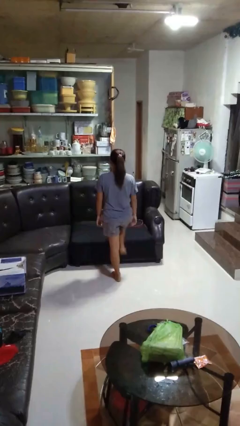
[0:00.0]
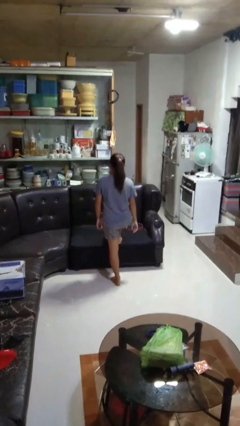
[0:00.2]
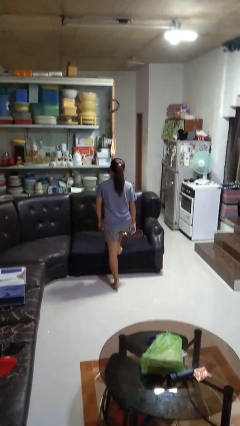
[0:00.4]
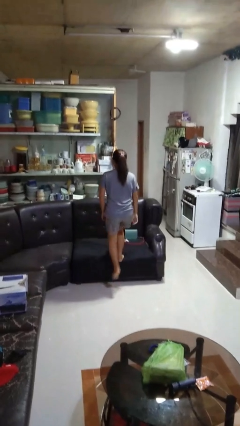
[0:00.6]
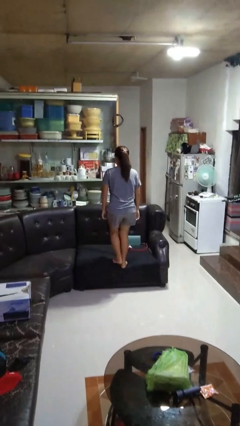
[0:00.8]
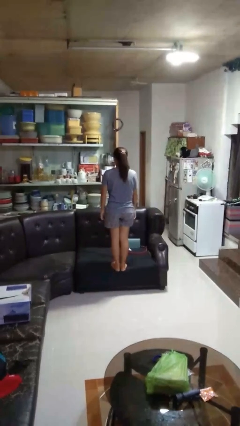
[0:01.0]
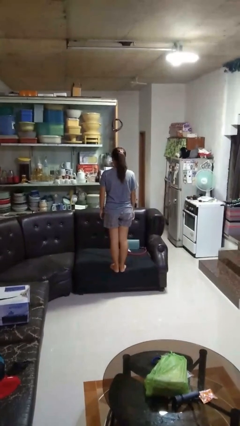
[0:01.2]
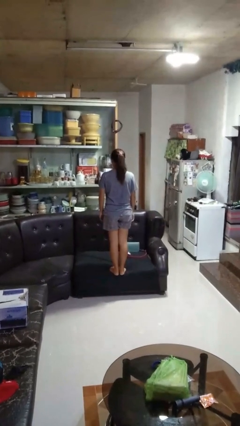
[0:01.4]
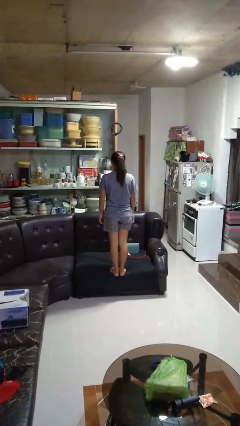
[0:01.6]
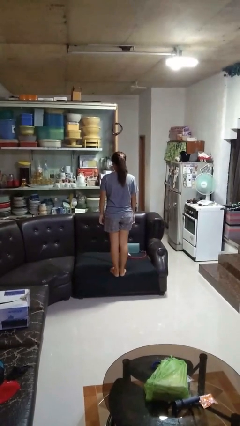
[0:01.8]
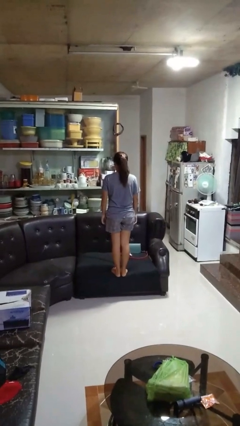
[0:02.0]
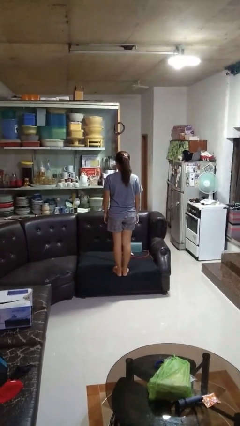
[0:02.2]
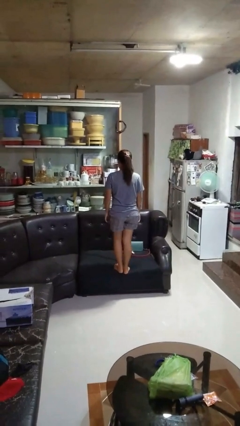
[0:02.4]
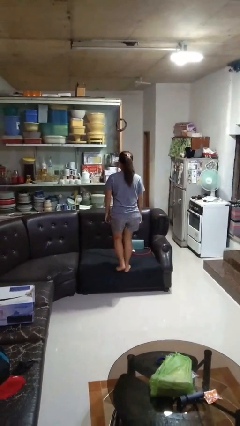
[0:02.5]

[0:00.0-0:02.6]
person climbs on couch

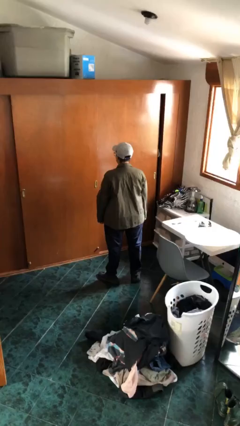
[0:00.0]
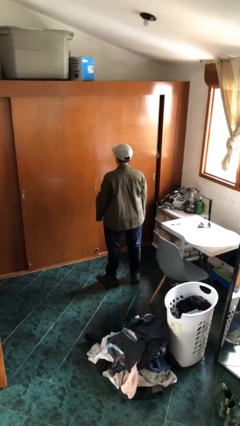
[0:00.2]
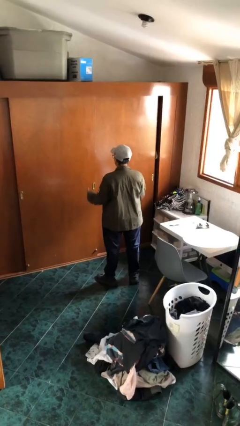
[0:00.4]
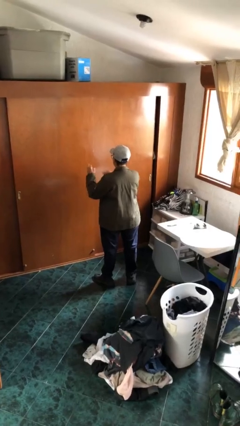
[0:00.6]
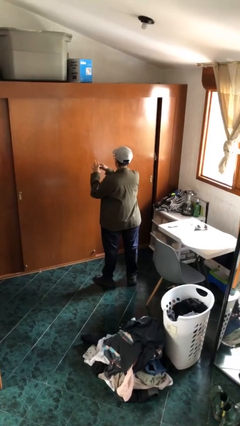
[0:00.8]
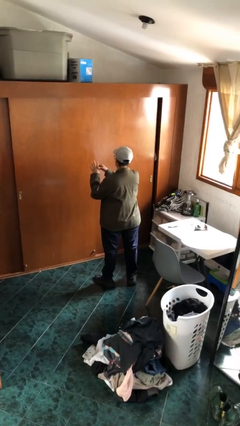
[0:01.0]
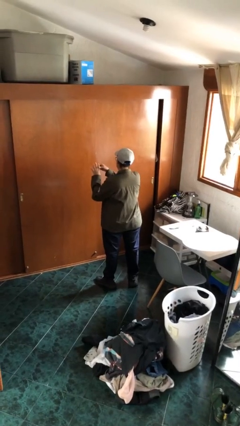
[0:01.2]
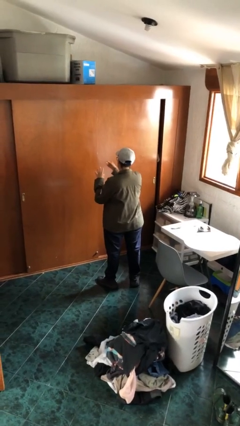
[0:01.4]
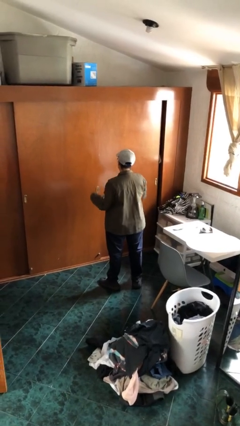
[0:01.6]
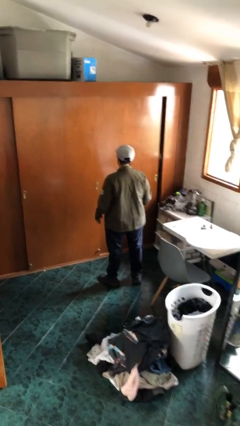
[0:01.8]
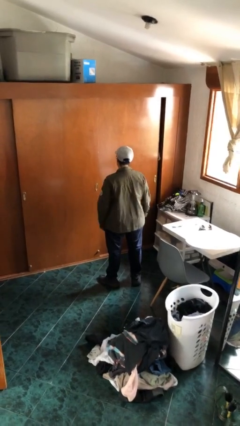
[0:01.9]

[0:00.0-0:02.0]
person takes off ring

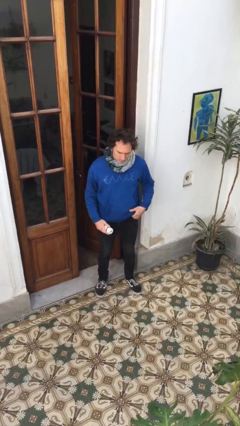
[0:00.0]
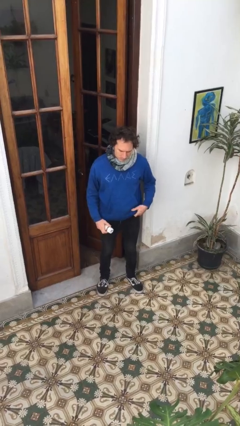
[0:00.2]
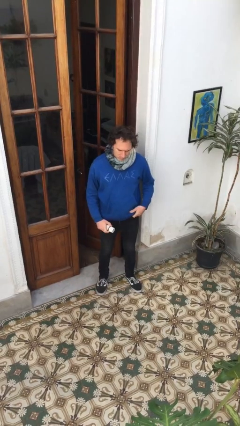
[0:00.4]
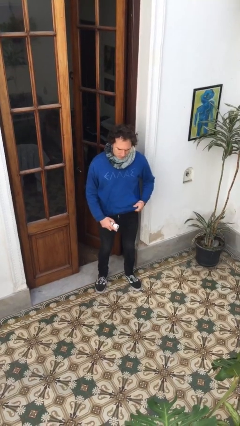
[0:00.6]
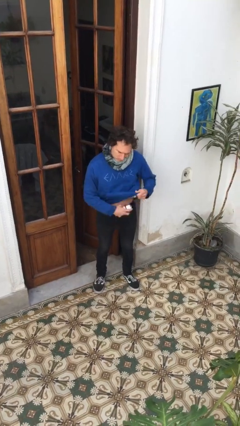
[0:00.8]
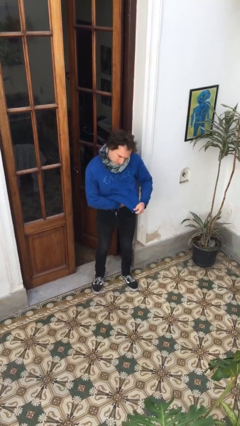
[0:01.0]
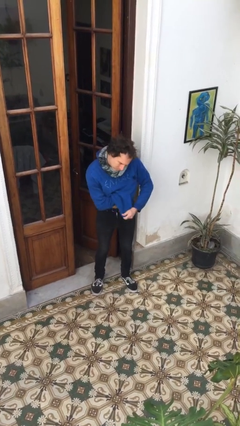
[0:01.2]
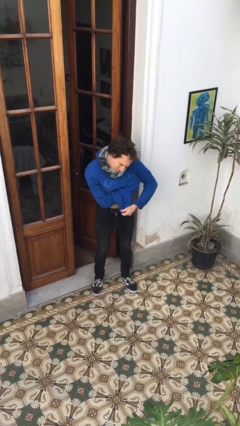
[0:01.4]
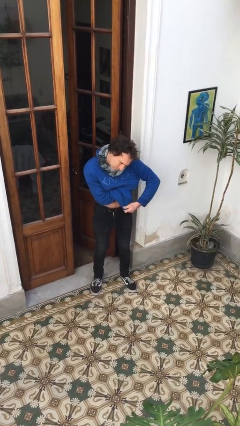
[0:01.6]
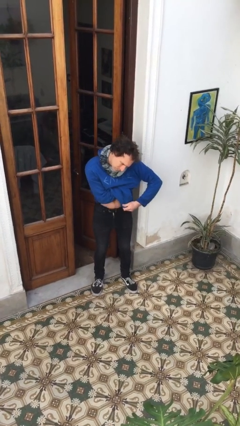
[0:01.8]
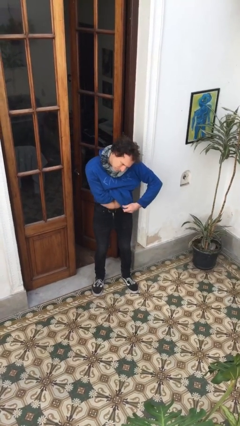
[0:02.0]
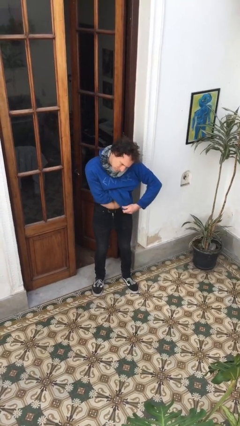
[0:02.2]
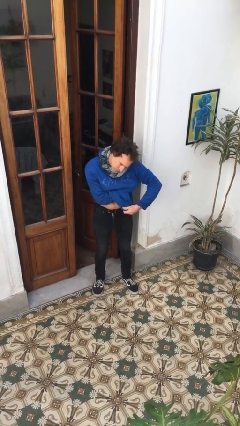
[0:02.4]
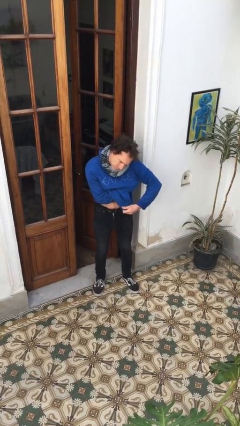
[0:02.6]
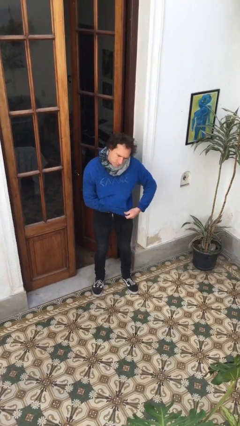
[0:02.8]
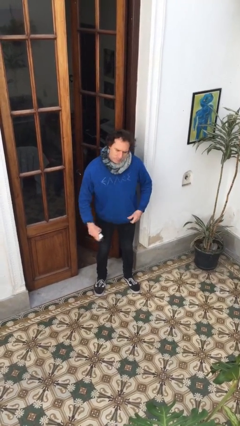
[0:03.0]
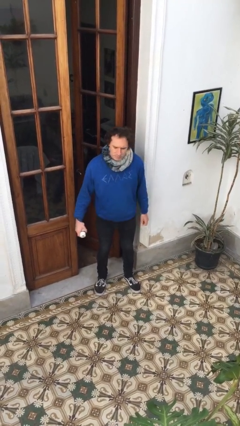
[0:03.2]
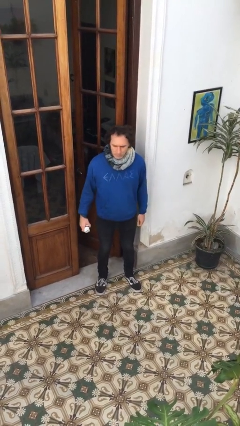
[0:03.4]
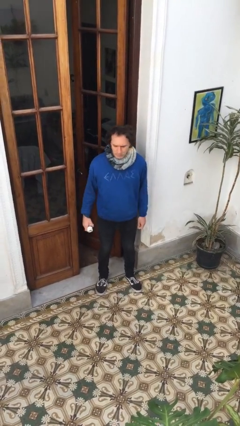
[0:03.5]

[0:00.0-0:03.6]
person applies deodorant

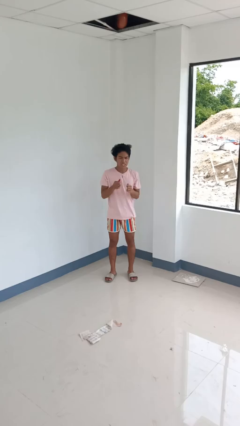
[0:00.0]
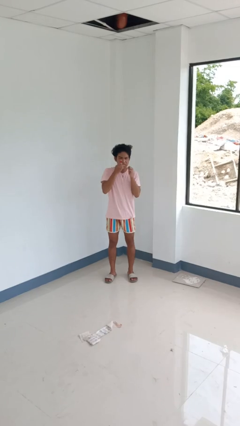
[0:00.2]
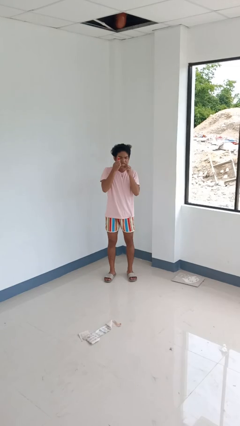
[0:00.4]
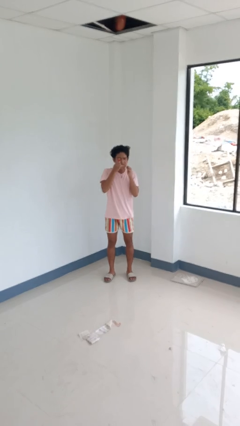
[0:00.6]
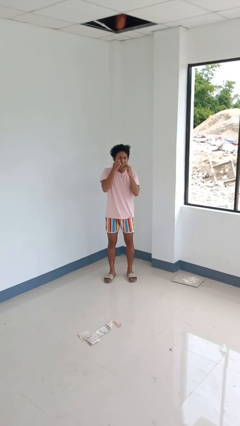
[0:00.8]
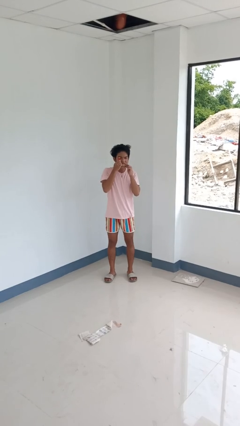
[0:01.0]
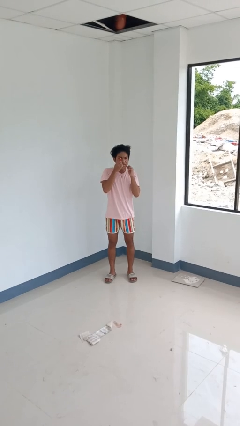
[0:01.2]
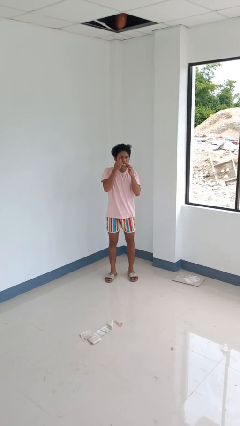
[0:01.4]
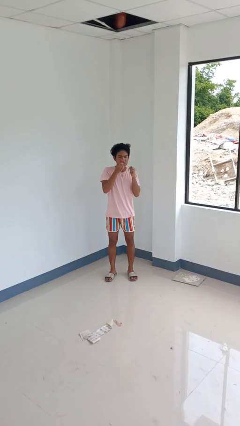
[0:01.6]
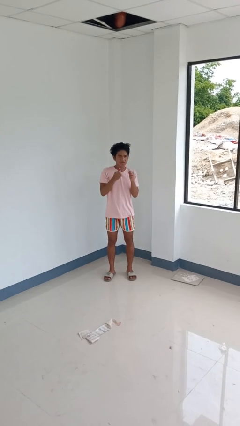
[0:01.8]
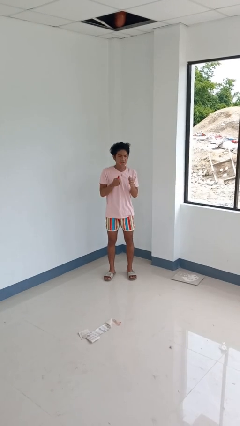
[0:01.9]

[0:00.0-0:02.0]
person flosses

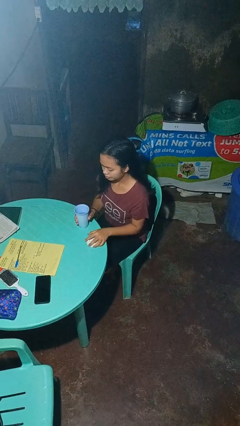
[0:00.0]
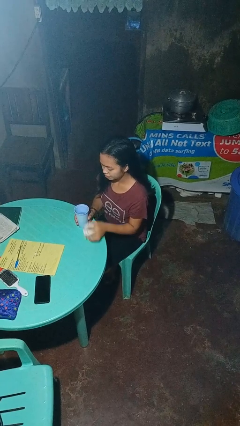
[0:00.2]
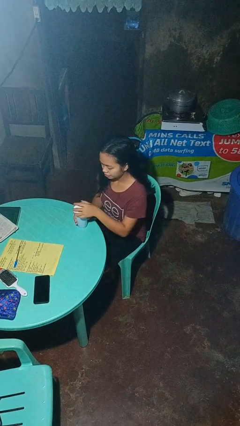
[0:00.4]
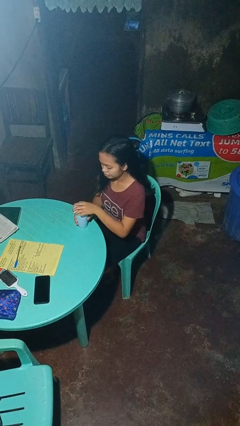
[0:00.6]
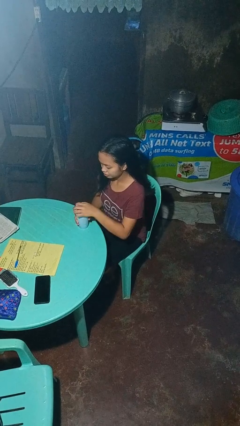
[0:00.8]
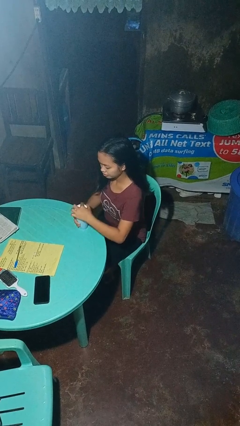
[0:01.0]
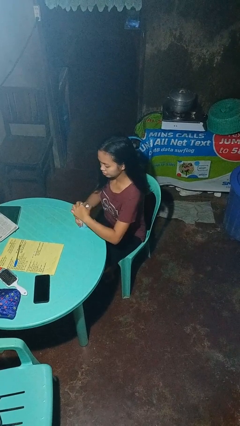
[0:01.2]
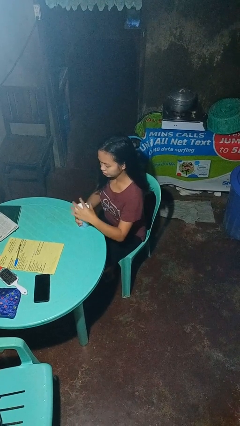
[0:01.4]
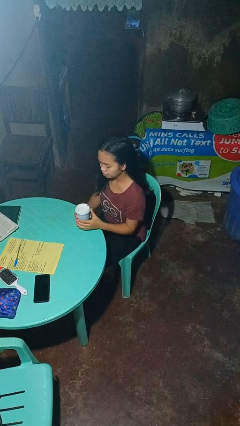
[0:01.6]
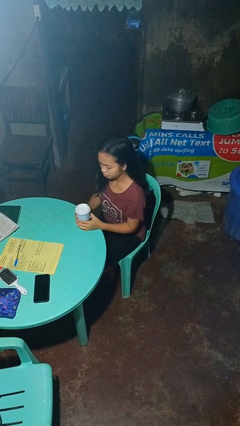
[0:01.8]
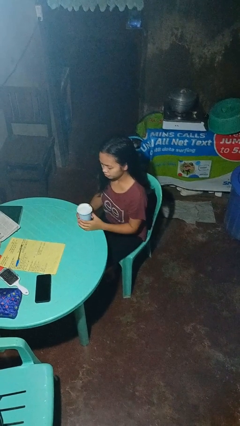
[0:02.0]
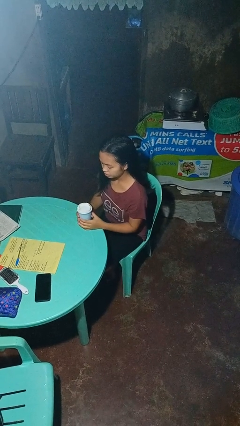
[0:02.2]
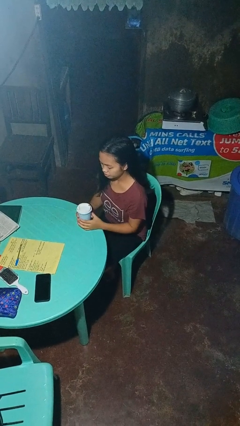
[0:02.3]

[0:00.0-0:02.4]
person screws lid to bottle

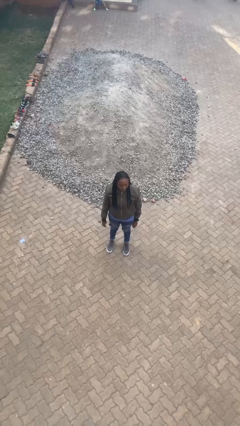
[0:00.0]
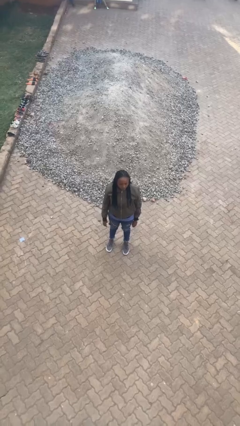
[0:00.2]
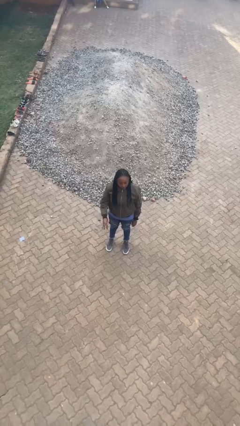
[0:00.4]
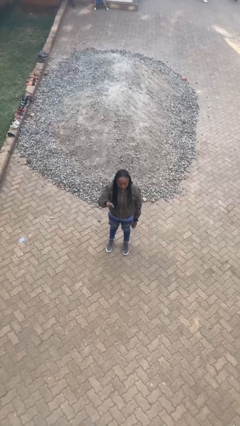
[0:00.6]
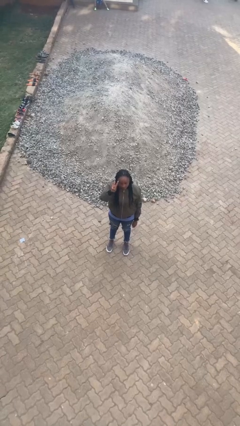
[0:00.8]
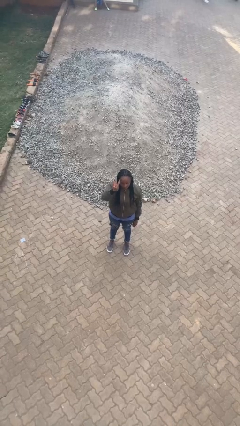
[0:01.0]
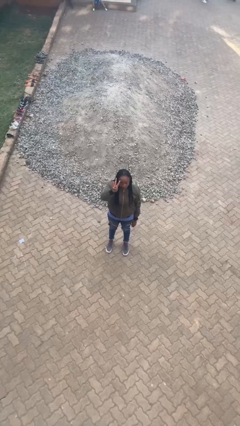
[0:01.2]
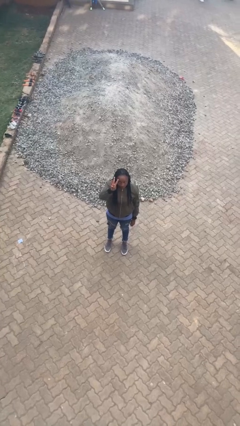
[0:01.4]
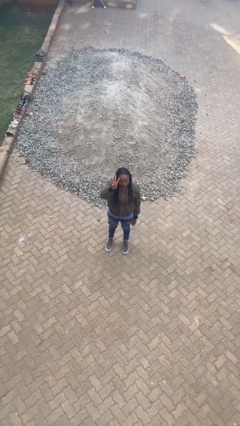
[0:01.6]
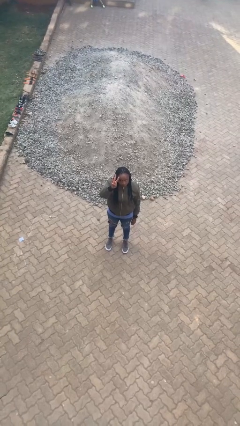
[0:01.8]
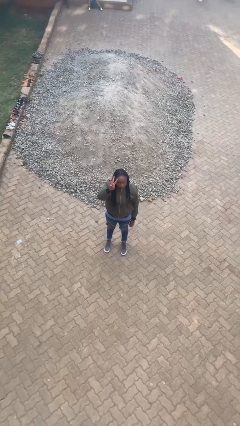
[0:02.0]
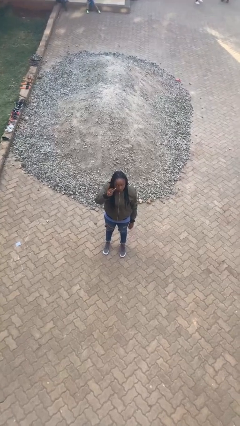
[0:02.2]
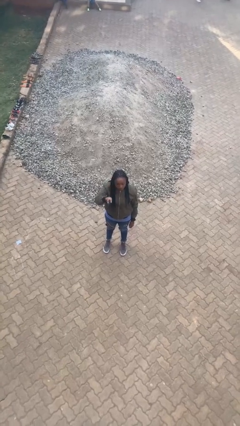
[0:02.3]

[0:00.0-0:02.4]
person gestures number three

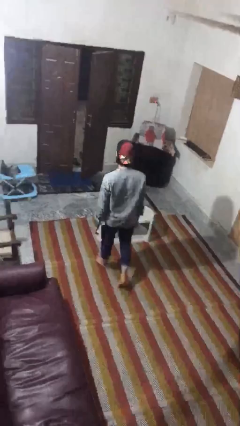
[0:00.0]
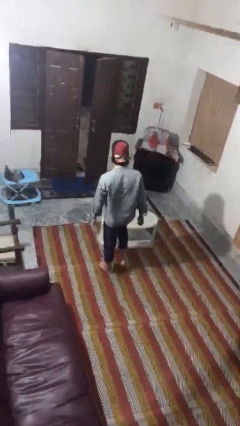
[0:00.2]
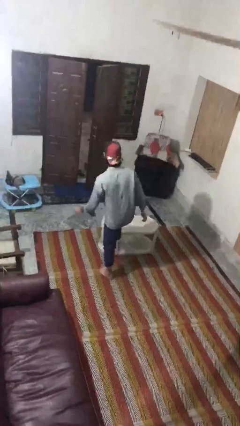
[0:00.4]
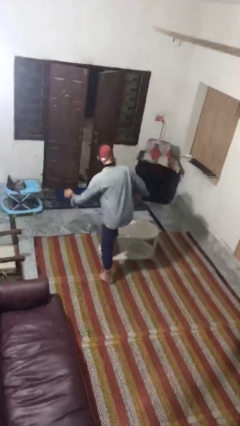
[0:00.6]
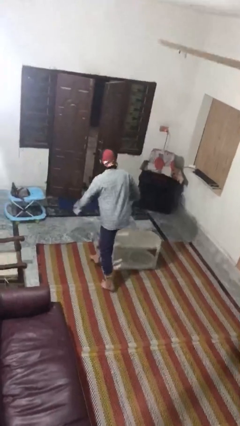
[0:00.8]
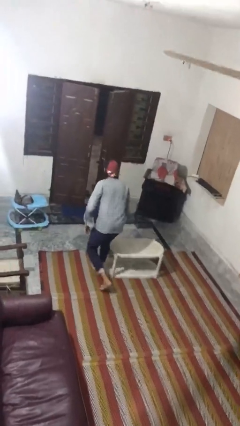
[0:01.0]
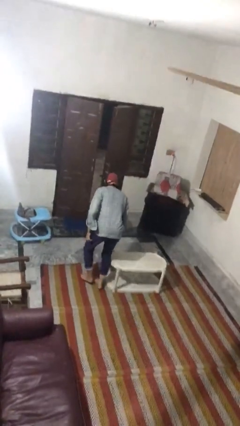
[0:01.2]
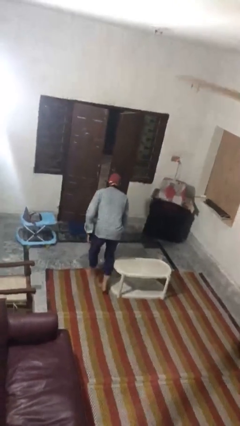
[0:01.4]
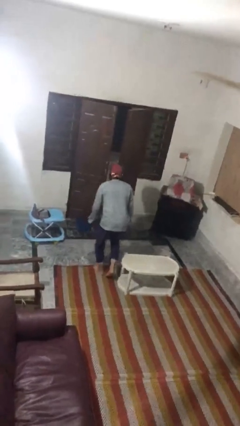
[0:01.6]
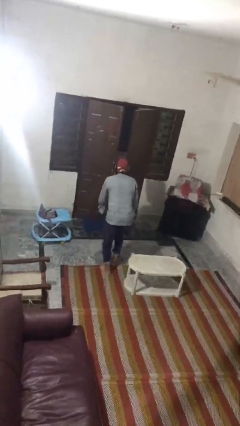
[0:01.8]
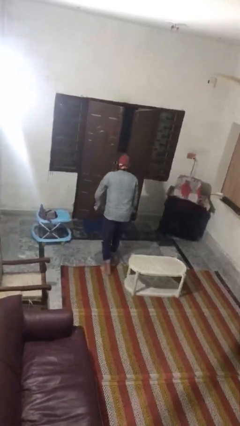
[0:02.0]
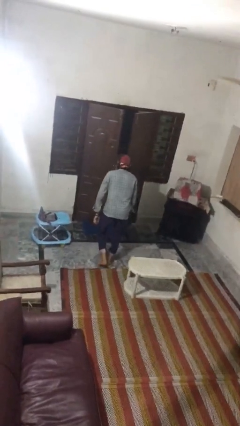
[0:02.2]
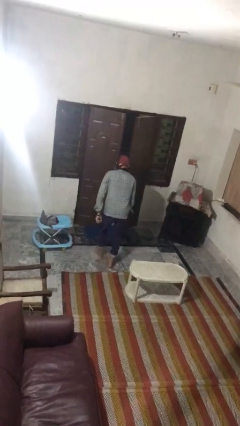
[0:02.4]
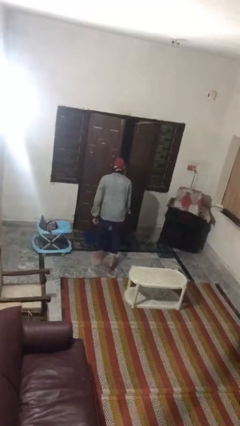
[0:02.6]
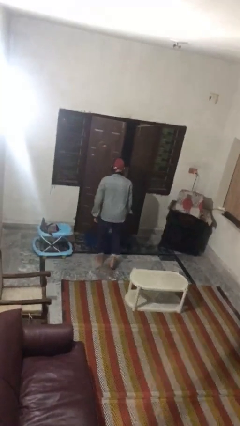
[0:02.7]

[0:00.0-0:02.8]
person bumps into table
